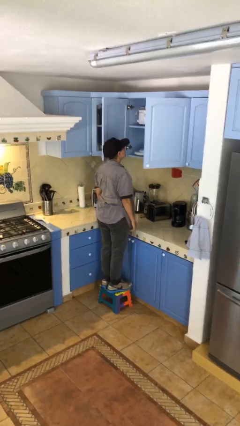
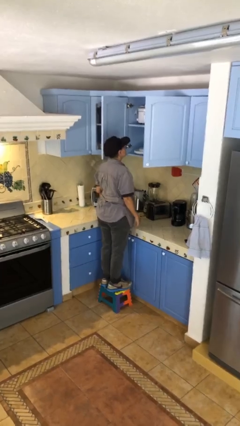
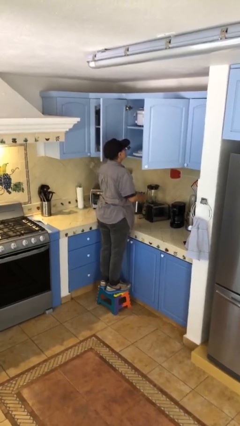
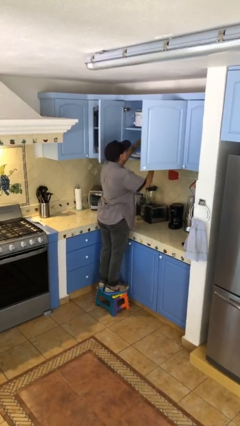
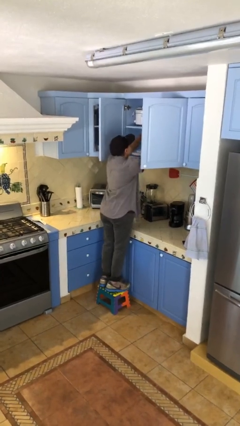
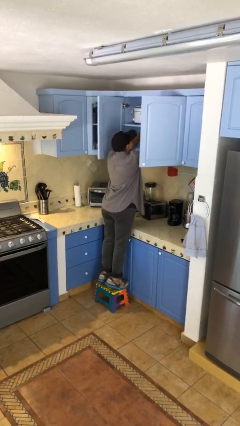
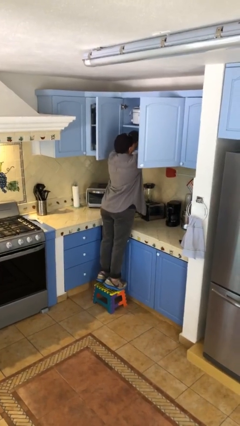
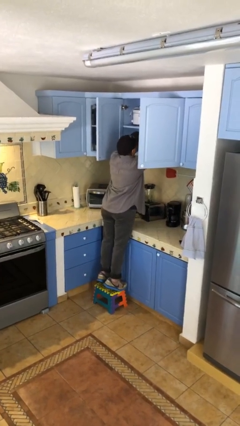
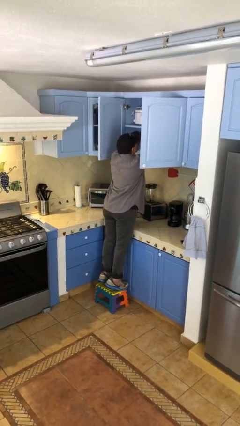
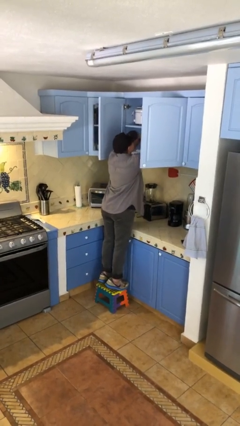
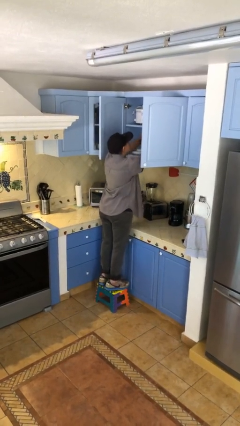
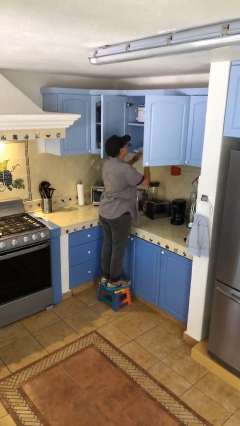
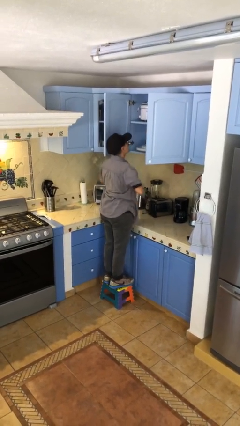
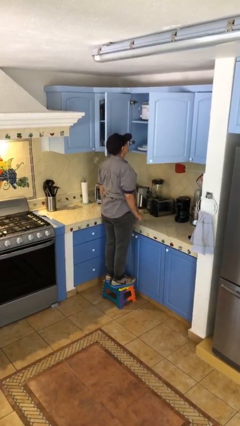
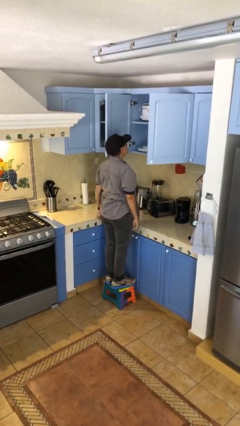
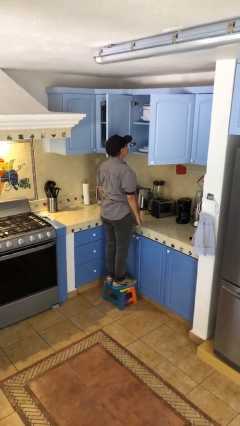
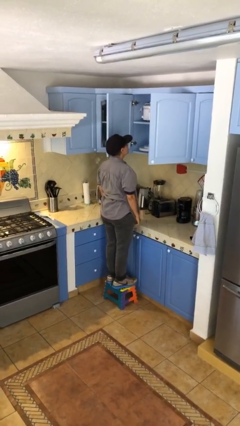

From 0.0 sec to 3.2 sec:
person searches in cabinet

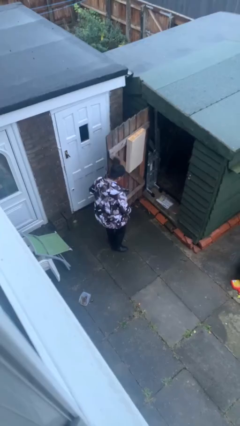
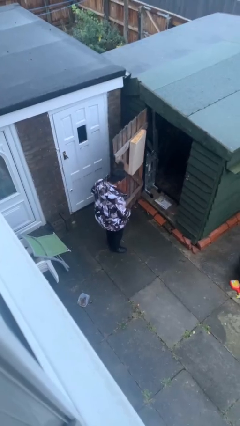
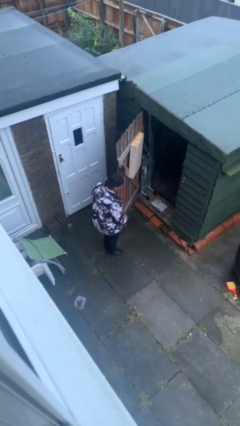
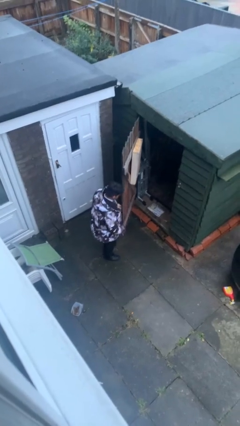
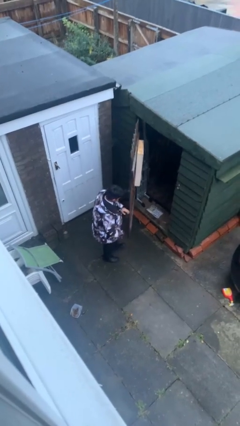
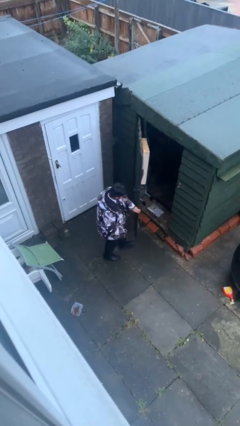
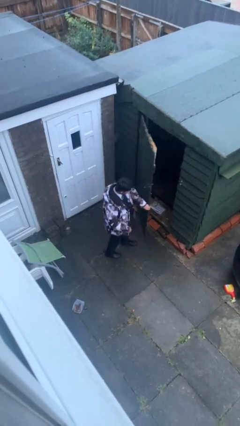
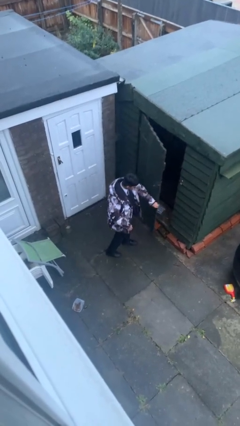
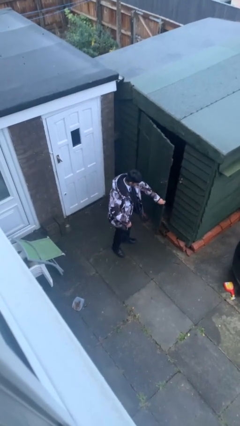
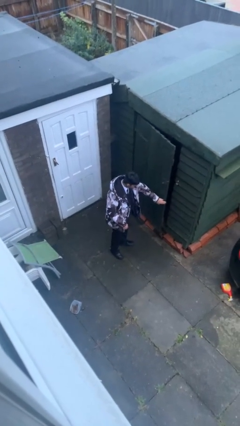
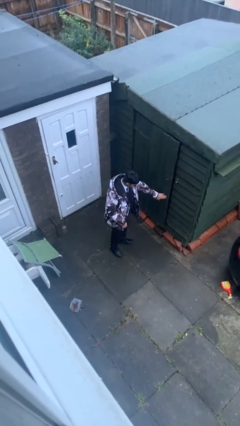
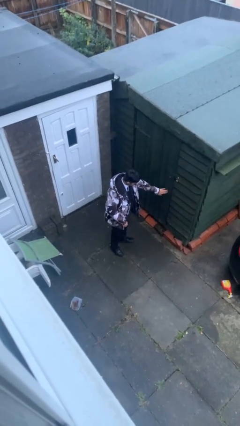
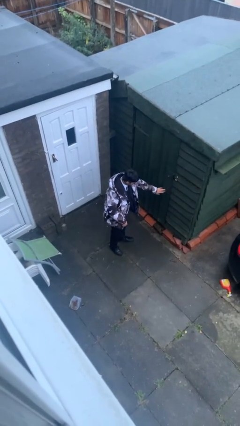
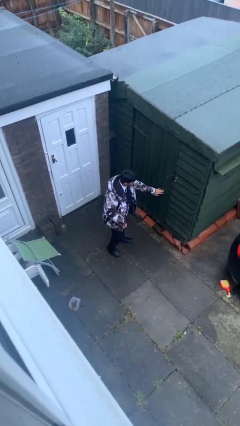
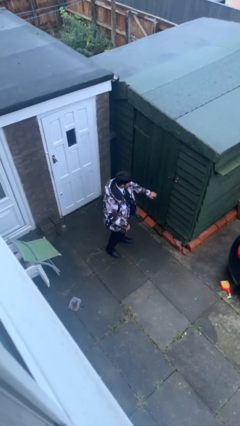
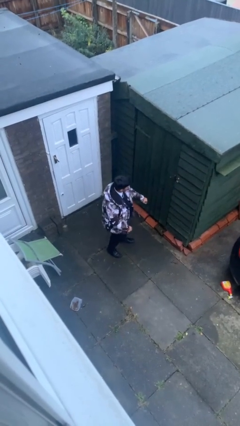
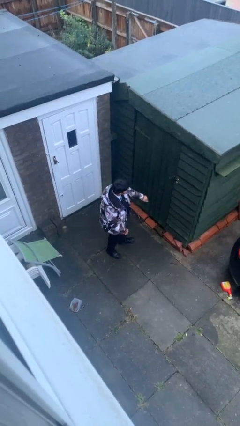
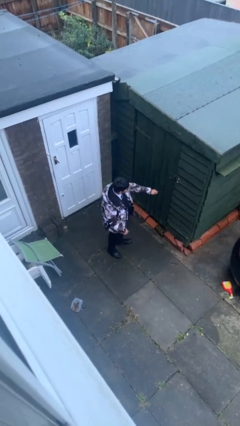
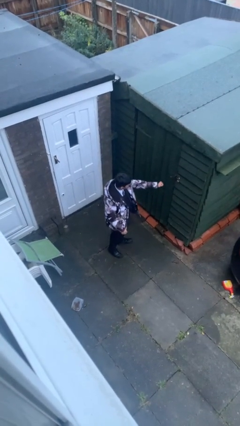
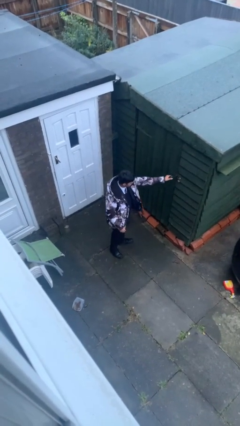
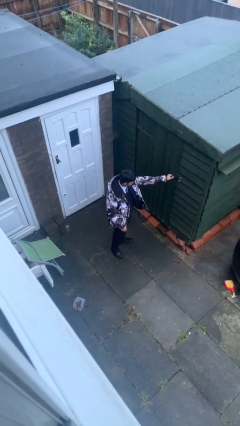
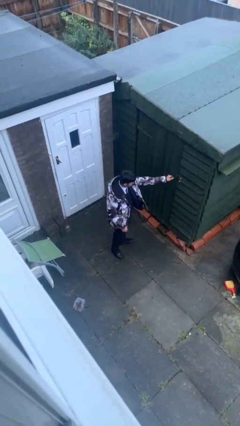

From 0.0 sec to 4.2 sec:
person closes facility door

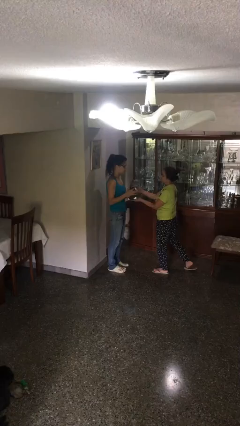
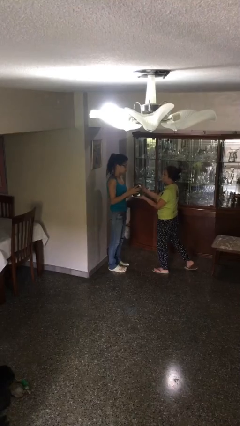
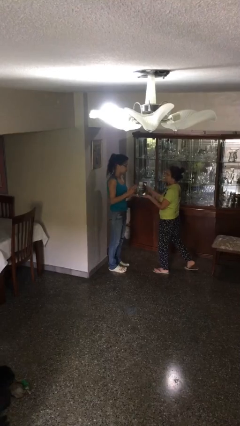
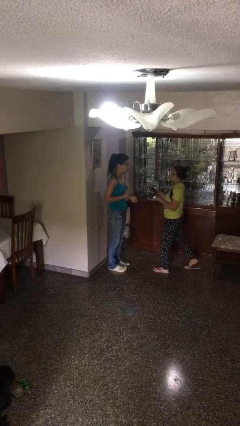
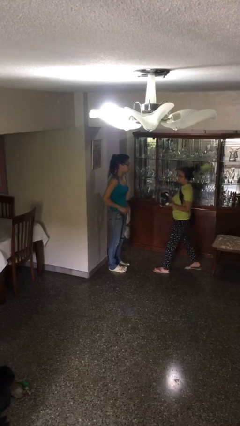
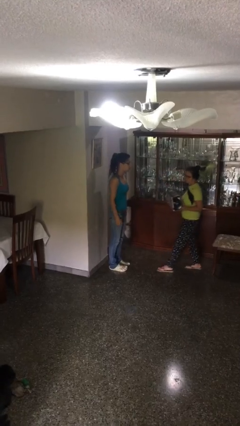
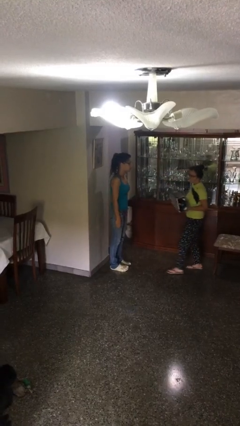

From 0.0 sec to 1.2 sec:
person transfers object to person

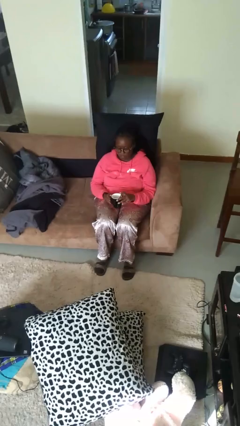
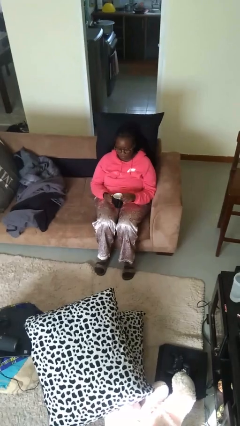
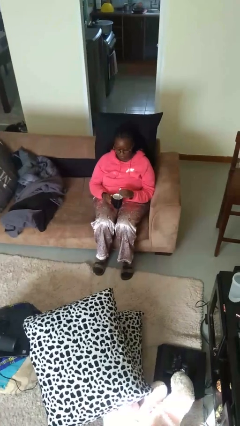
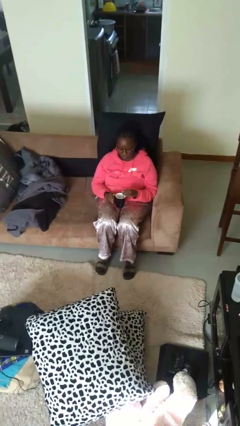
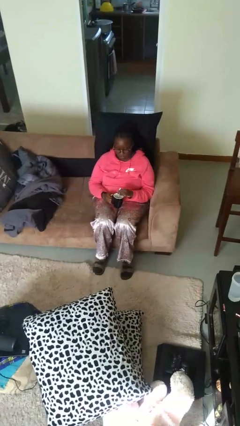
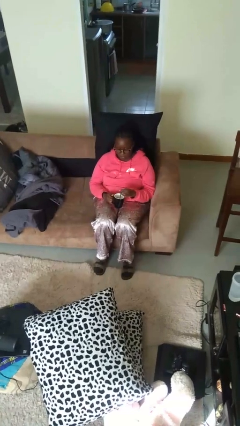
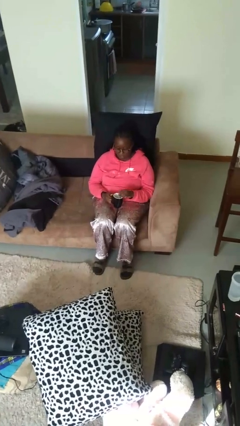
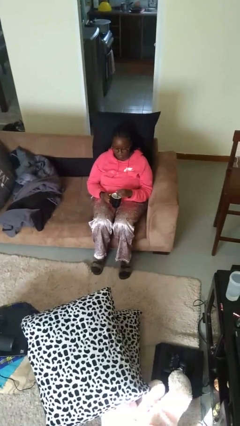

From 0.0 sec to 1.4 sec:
person stirs mug

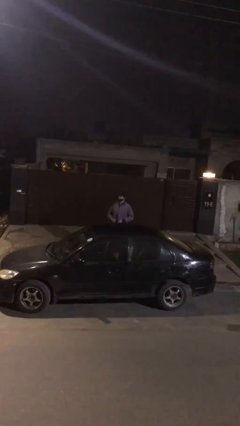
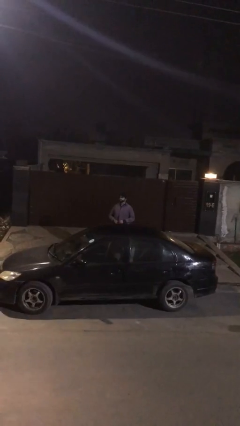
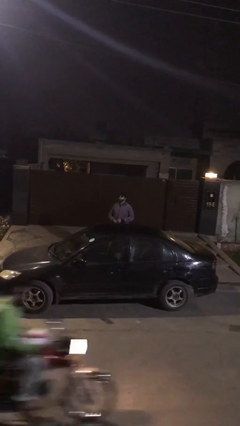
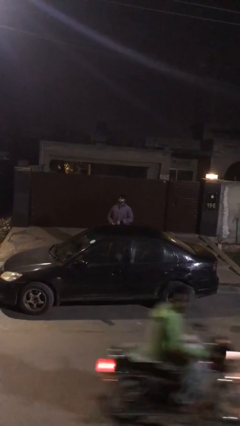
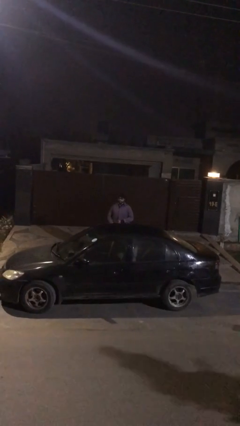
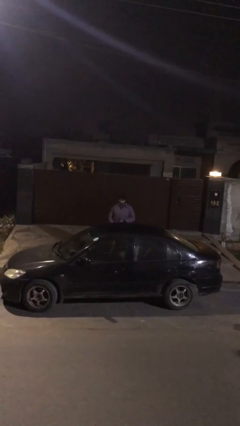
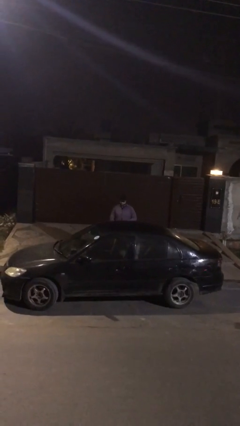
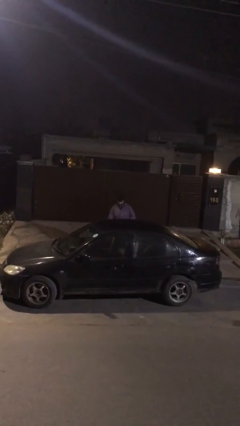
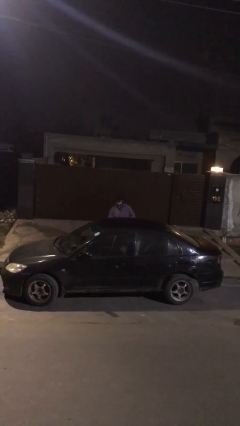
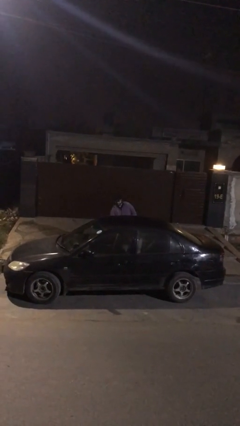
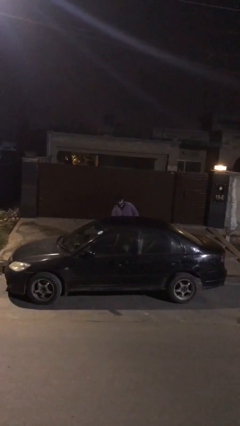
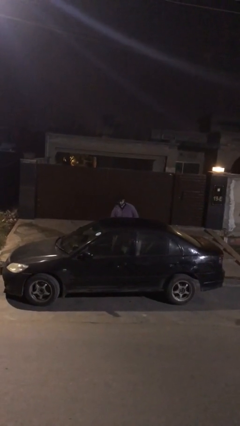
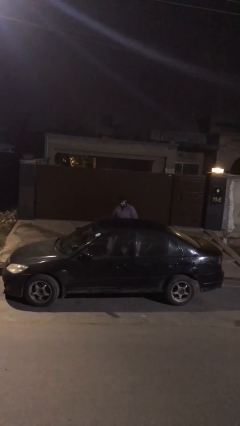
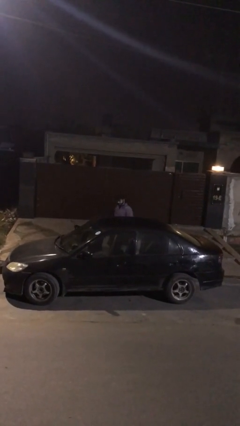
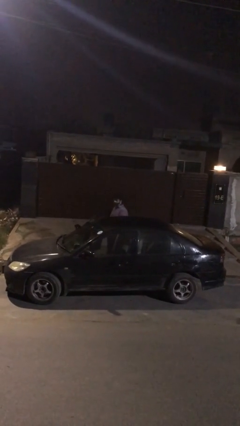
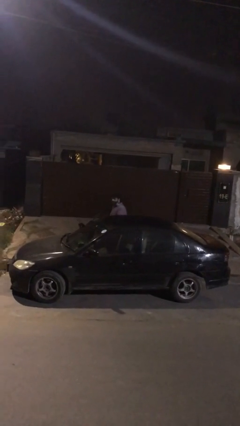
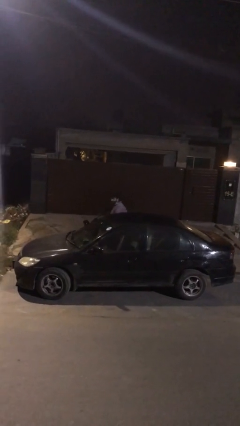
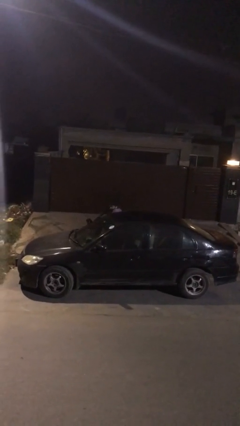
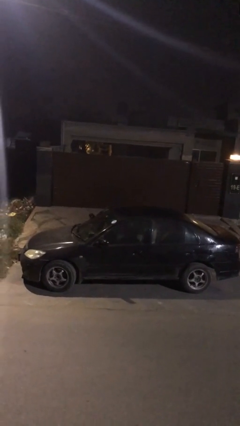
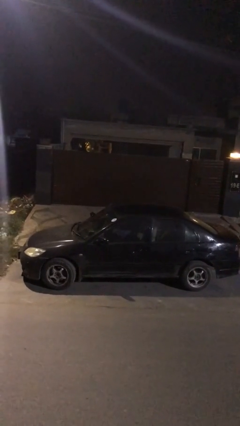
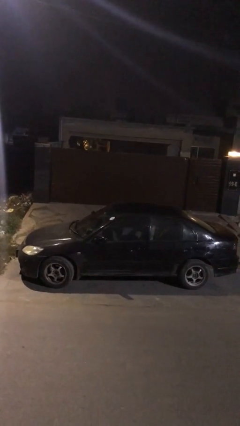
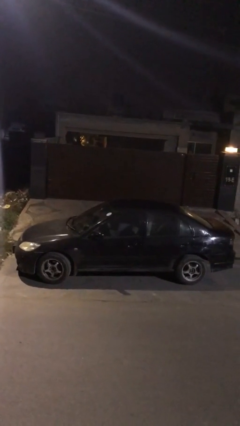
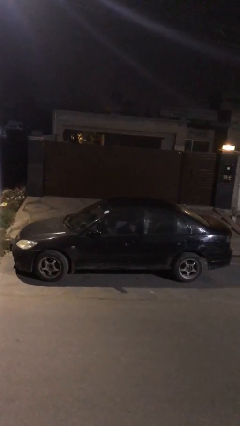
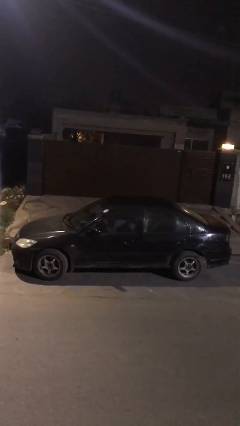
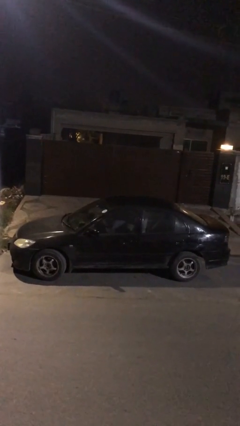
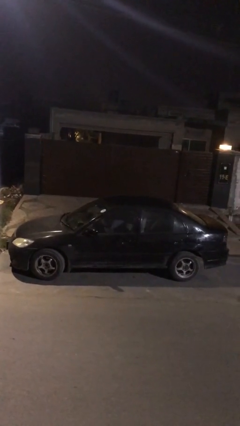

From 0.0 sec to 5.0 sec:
car picks up person

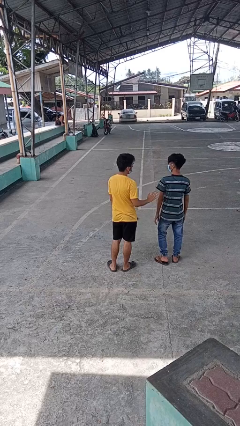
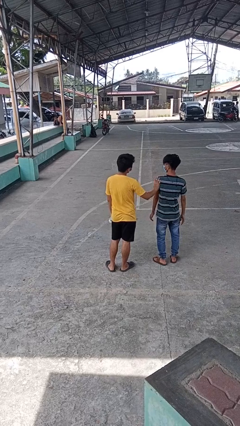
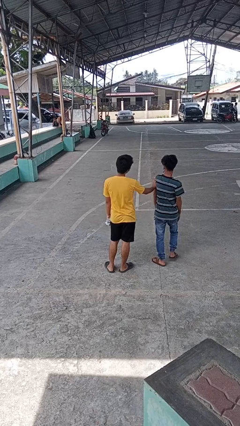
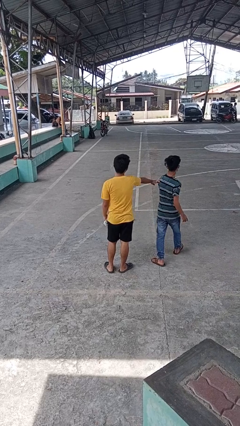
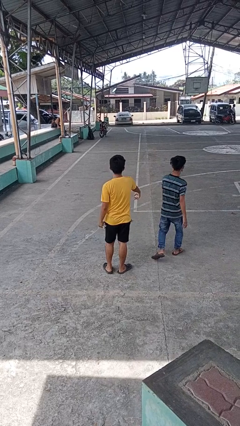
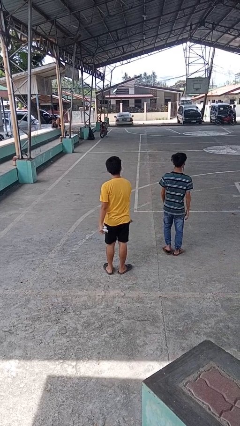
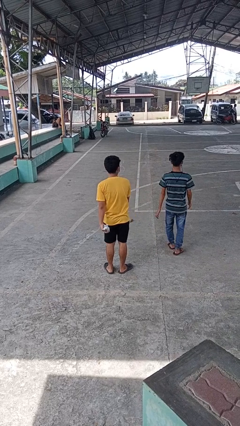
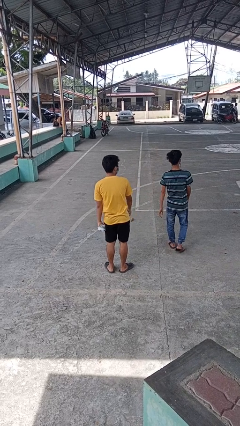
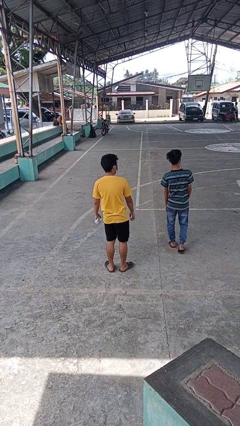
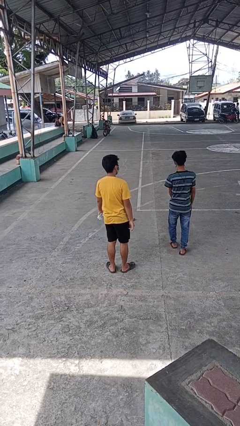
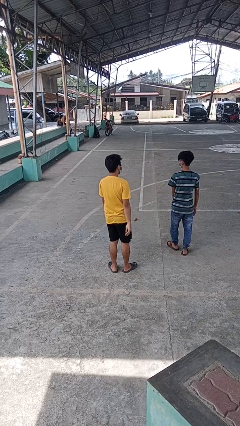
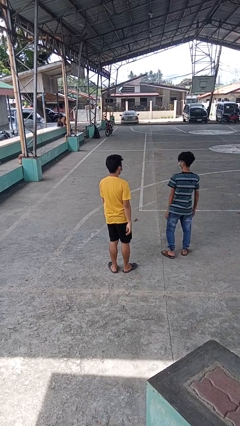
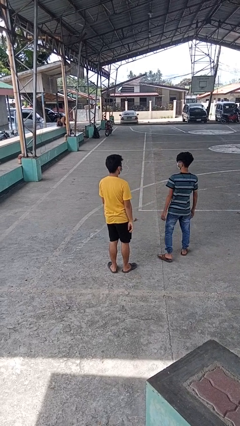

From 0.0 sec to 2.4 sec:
person shoves person

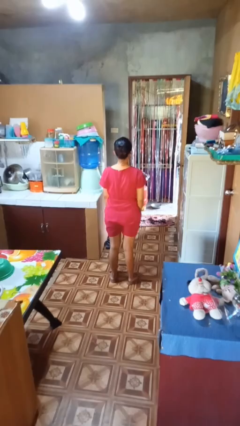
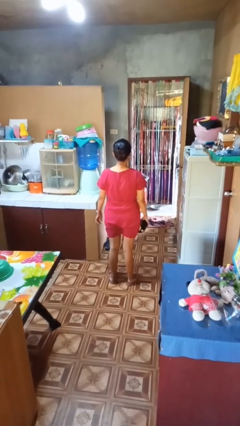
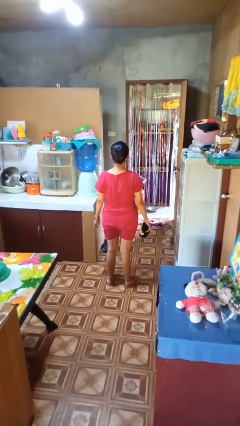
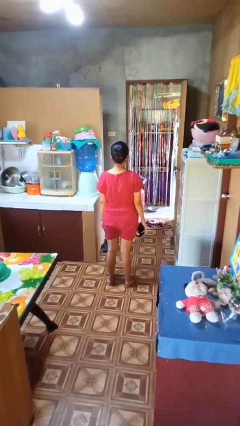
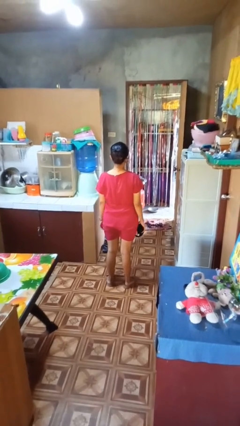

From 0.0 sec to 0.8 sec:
person picks up object from floor
